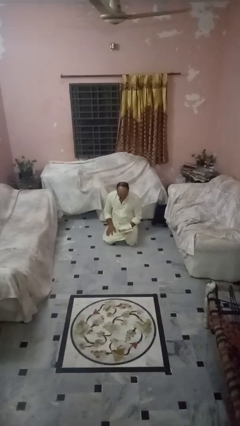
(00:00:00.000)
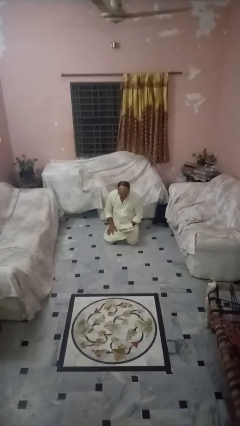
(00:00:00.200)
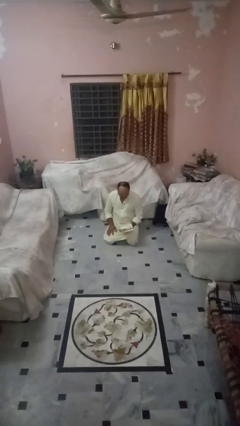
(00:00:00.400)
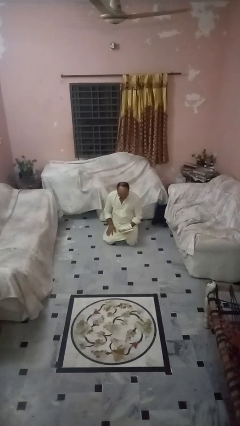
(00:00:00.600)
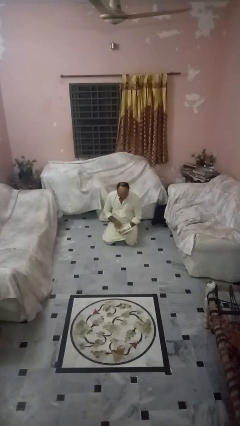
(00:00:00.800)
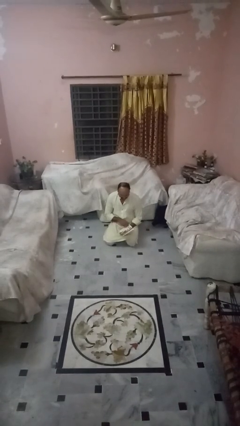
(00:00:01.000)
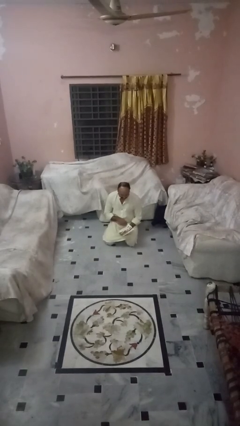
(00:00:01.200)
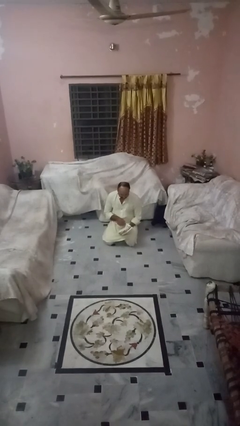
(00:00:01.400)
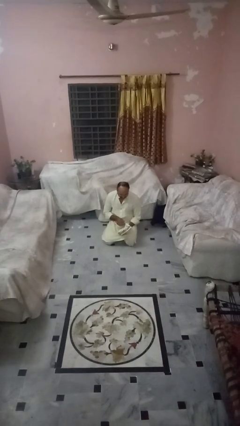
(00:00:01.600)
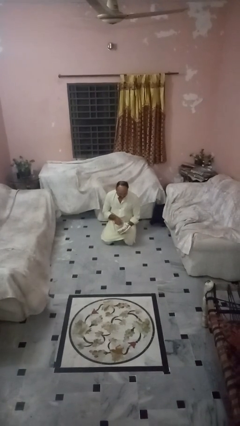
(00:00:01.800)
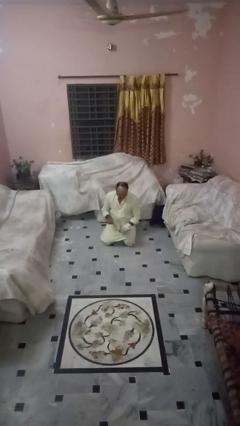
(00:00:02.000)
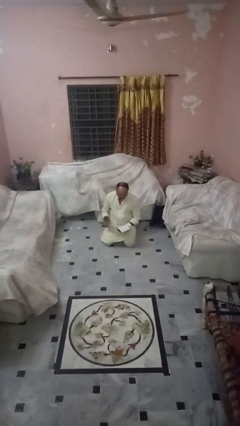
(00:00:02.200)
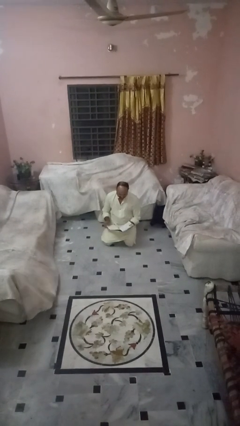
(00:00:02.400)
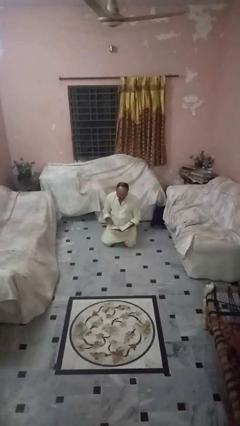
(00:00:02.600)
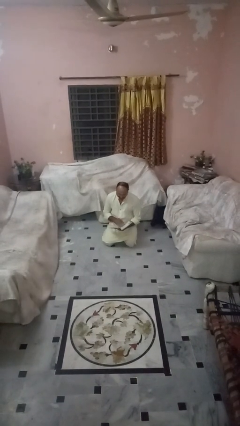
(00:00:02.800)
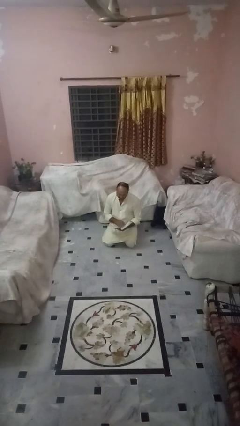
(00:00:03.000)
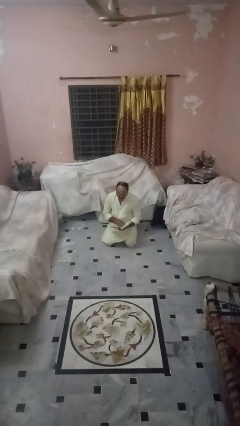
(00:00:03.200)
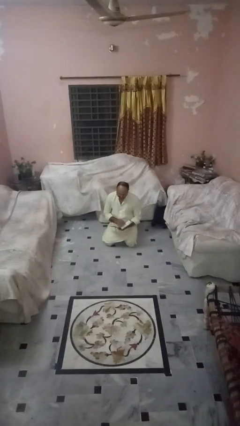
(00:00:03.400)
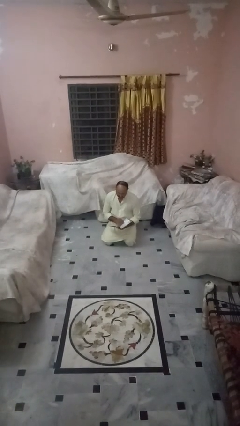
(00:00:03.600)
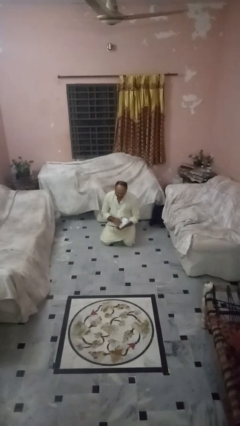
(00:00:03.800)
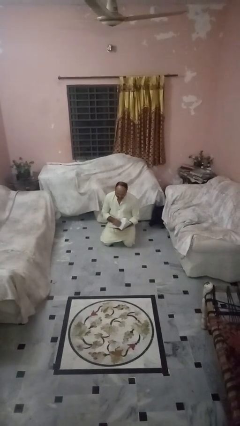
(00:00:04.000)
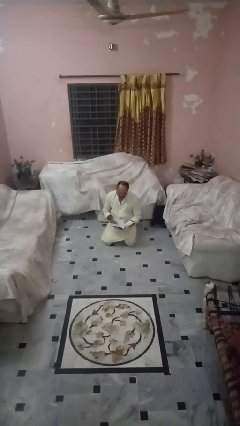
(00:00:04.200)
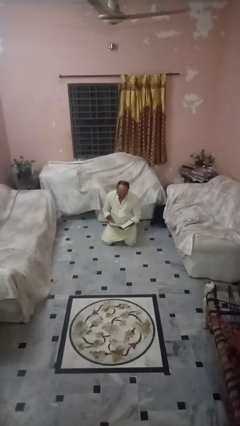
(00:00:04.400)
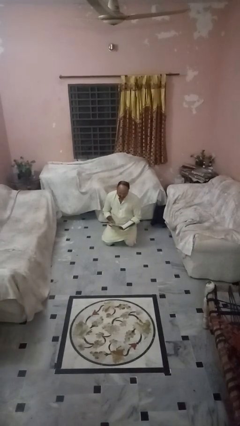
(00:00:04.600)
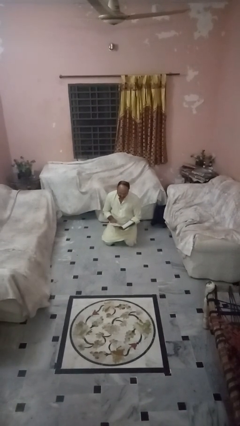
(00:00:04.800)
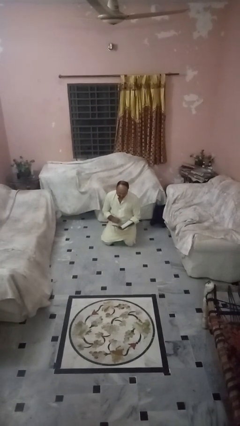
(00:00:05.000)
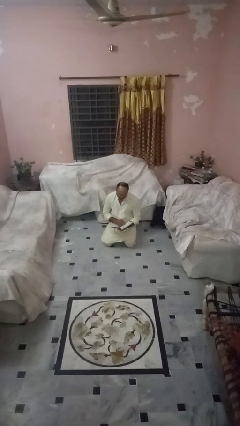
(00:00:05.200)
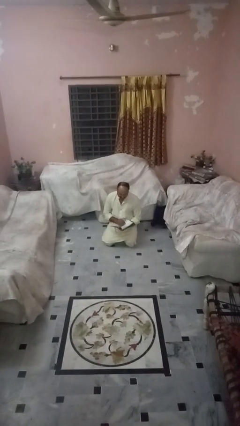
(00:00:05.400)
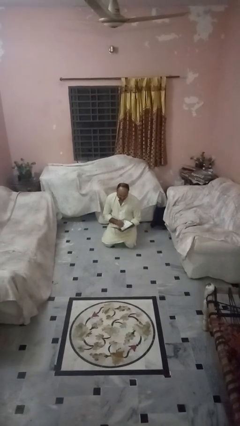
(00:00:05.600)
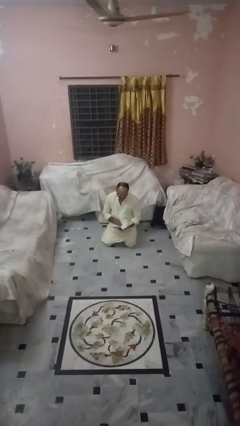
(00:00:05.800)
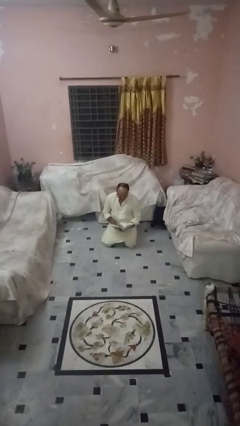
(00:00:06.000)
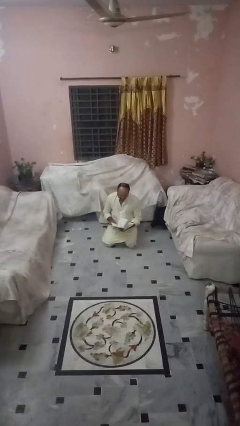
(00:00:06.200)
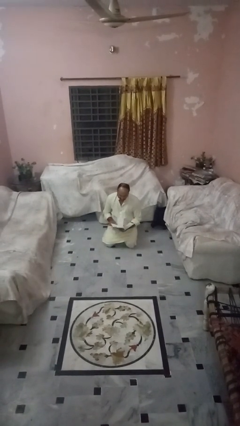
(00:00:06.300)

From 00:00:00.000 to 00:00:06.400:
person reads magazine

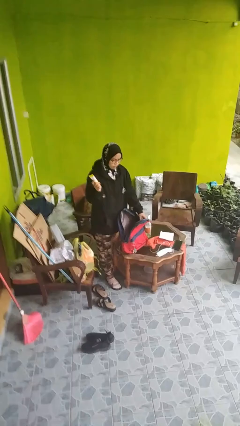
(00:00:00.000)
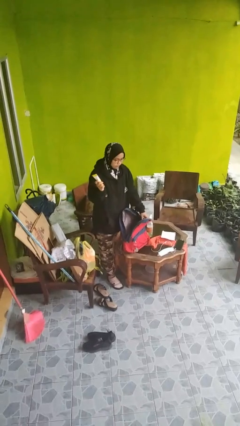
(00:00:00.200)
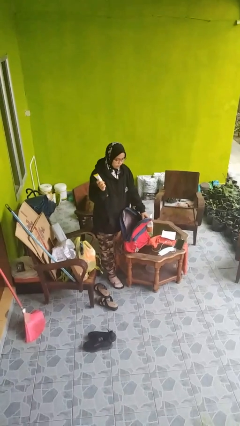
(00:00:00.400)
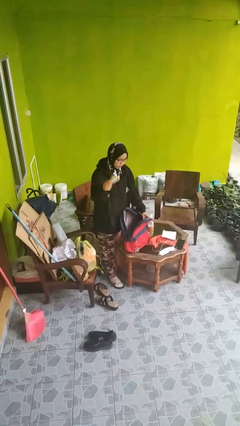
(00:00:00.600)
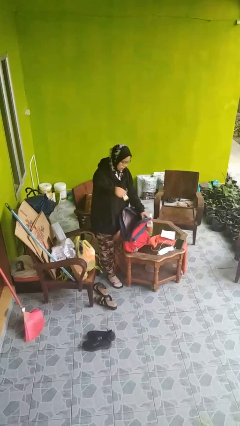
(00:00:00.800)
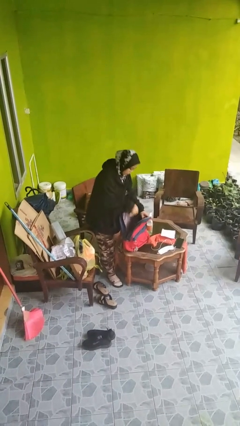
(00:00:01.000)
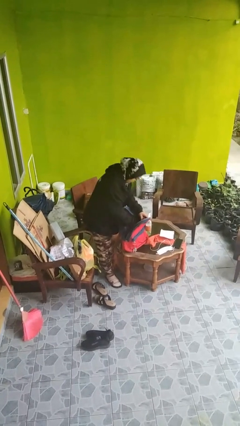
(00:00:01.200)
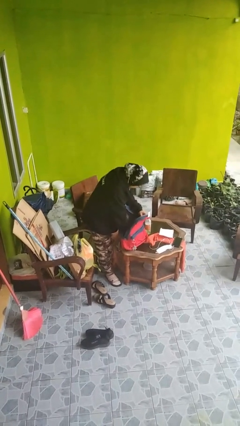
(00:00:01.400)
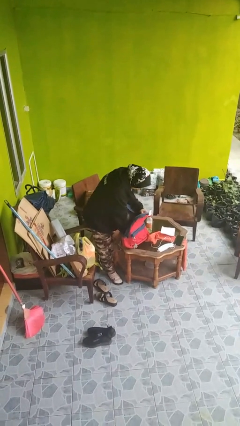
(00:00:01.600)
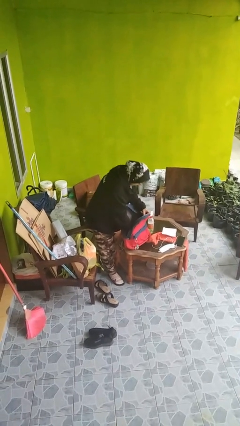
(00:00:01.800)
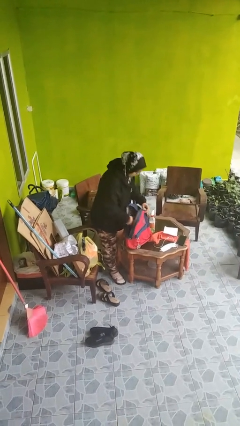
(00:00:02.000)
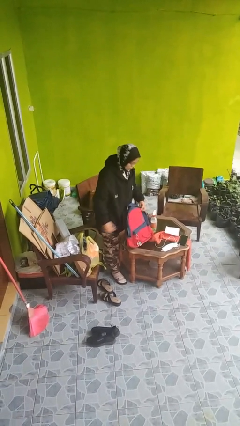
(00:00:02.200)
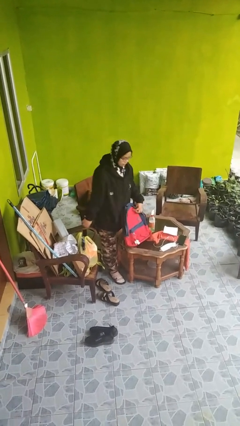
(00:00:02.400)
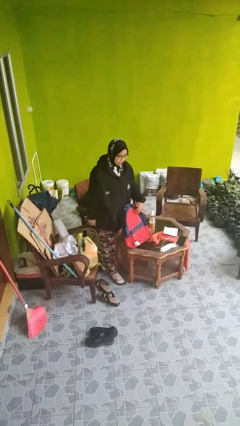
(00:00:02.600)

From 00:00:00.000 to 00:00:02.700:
person puts object into backpack

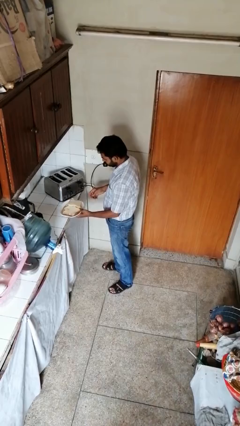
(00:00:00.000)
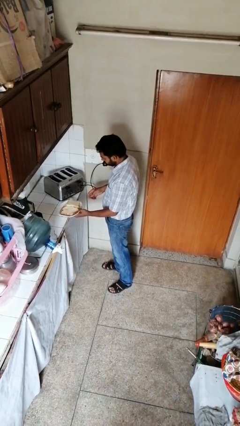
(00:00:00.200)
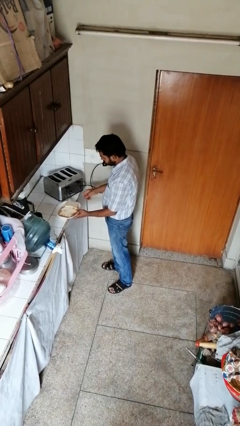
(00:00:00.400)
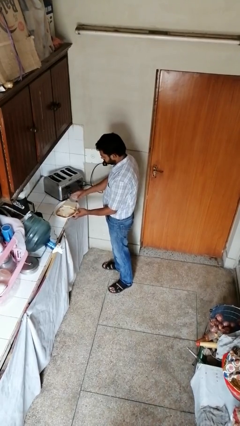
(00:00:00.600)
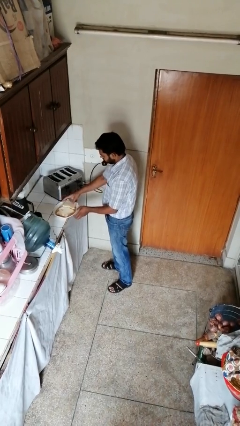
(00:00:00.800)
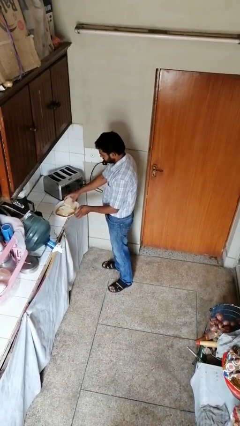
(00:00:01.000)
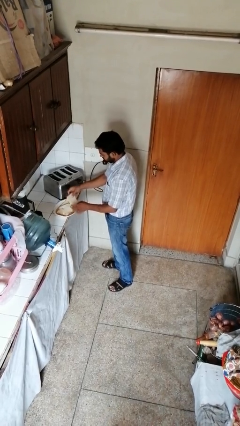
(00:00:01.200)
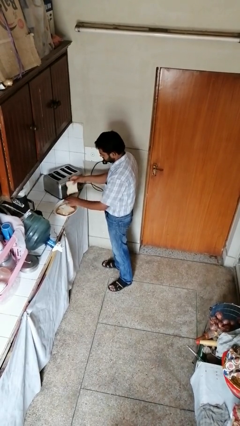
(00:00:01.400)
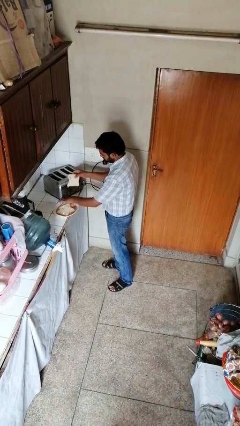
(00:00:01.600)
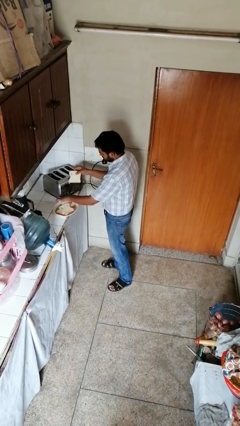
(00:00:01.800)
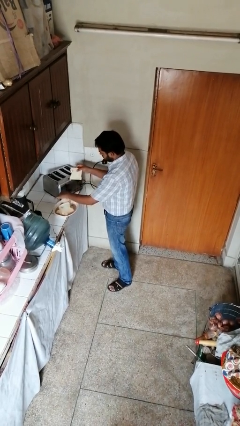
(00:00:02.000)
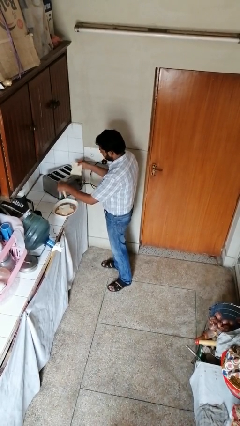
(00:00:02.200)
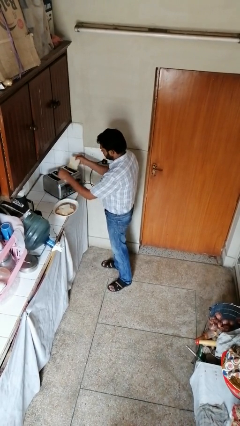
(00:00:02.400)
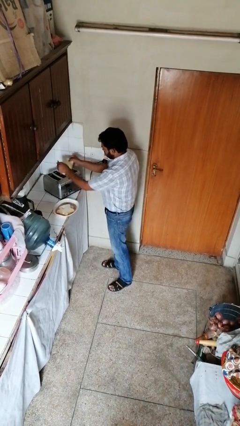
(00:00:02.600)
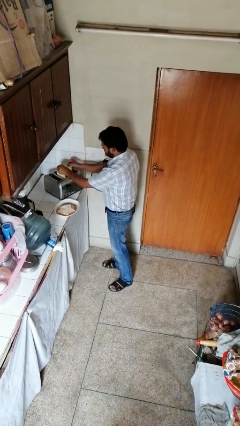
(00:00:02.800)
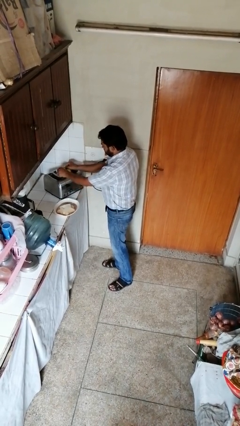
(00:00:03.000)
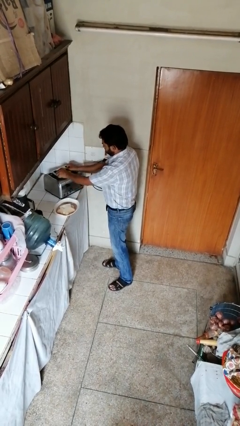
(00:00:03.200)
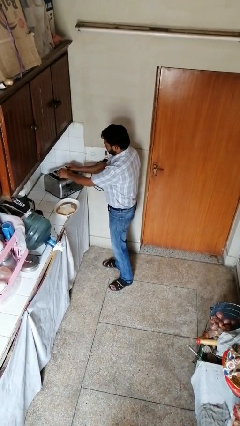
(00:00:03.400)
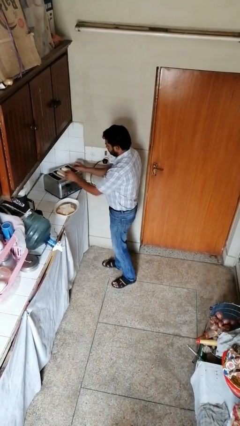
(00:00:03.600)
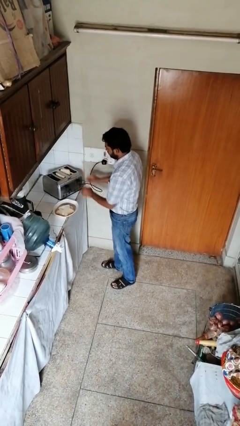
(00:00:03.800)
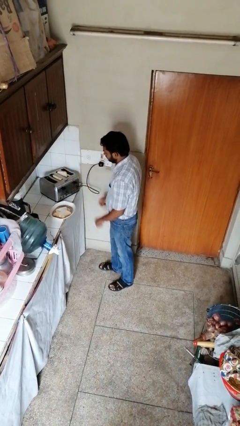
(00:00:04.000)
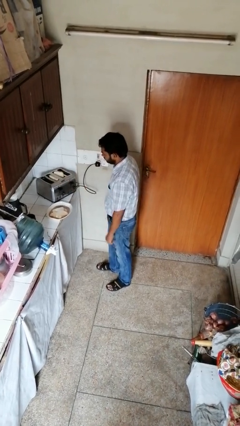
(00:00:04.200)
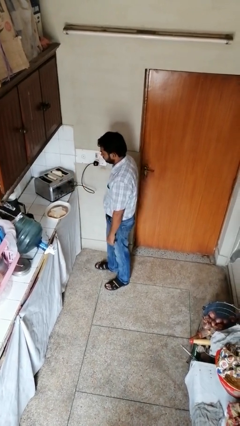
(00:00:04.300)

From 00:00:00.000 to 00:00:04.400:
person puts object into toaster

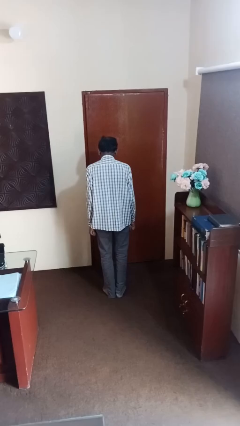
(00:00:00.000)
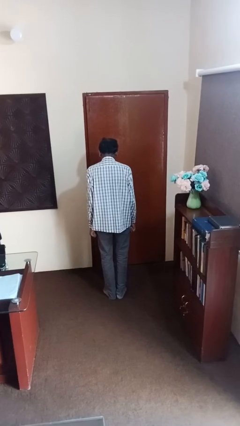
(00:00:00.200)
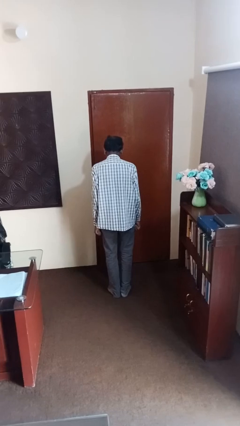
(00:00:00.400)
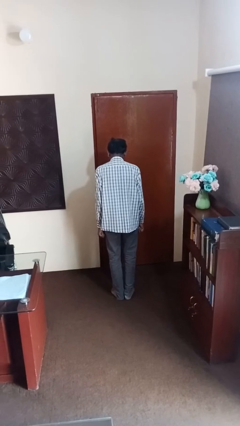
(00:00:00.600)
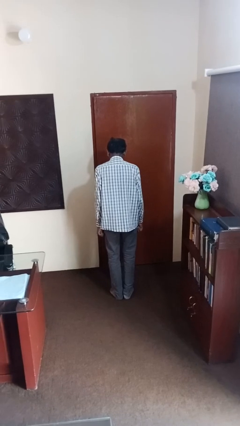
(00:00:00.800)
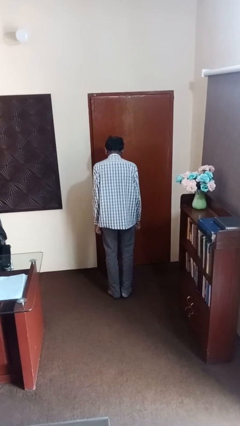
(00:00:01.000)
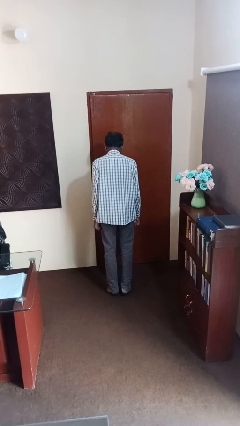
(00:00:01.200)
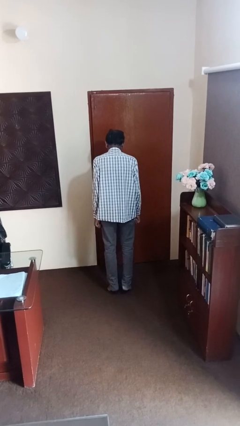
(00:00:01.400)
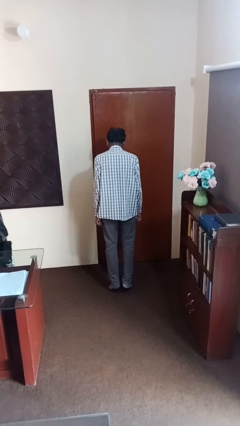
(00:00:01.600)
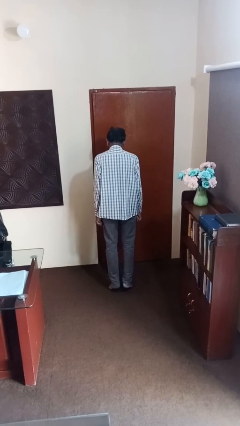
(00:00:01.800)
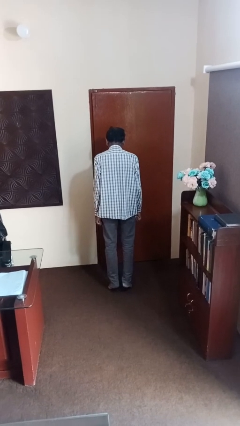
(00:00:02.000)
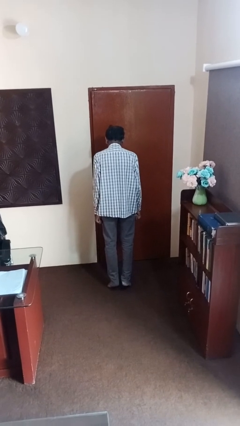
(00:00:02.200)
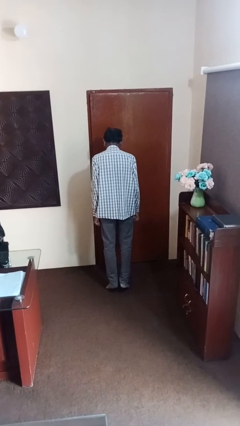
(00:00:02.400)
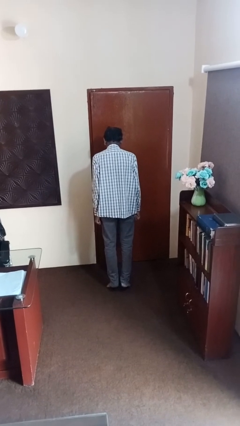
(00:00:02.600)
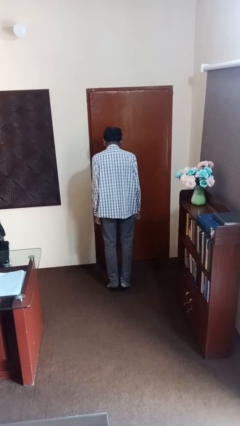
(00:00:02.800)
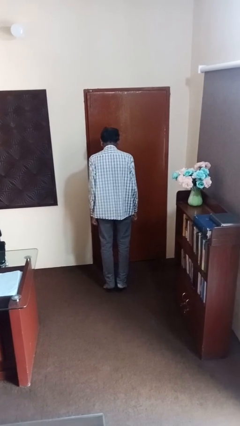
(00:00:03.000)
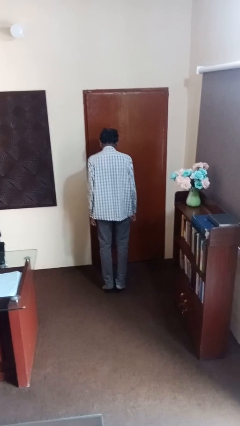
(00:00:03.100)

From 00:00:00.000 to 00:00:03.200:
person walks tiptoe

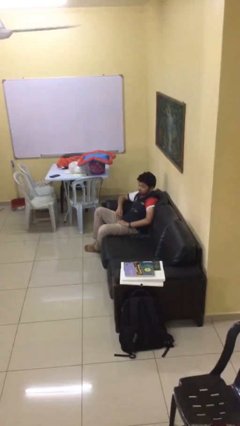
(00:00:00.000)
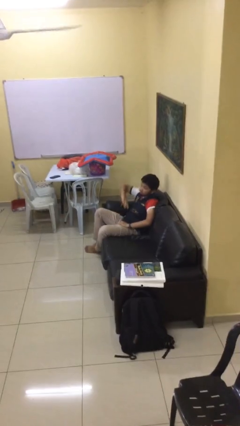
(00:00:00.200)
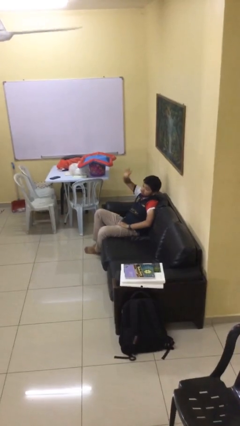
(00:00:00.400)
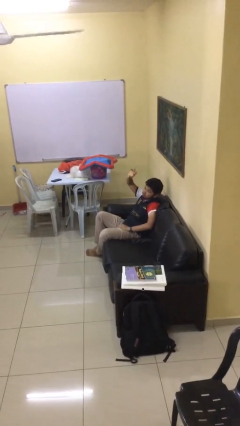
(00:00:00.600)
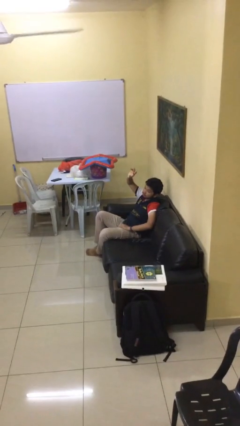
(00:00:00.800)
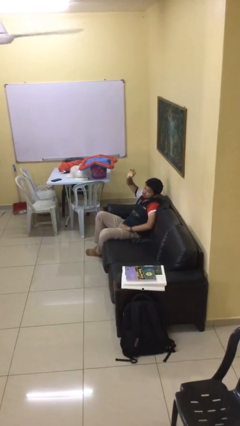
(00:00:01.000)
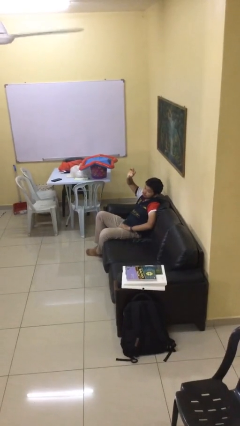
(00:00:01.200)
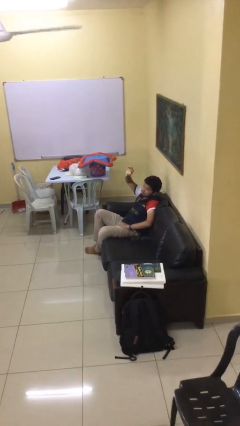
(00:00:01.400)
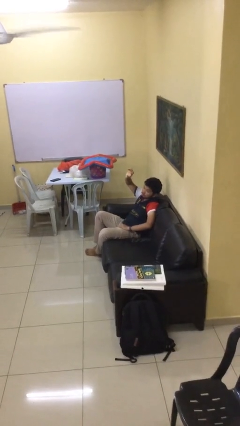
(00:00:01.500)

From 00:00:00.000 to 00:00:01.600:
person gestures swipe up
